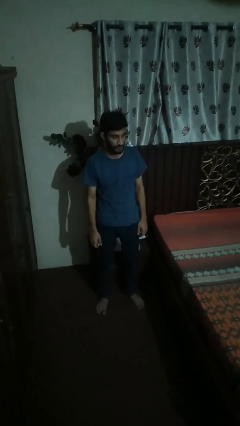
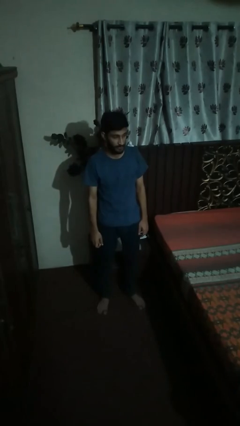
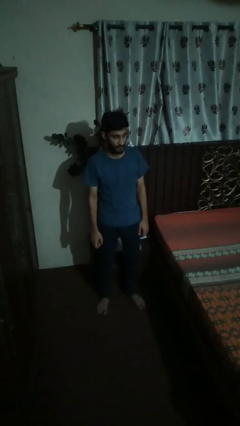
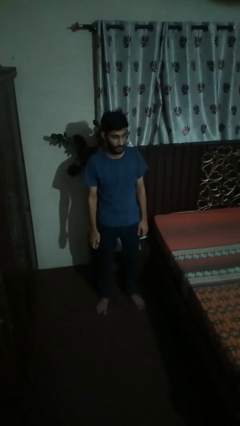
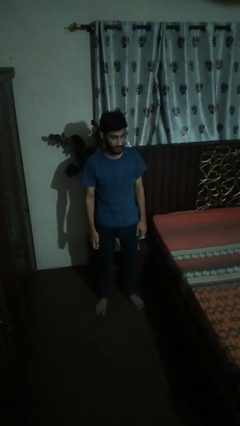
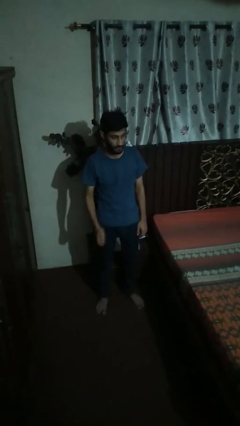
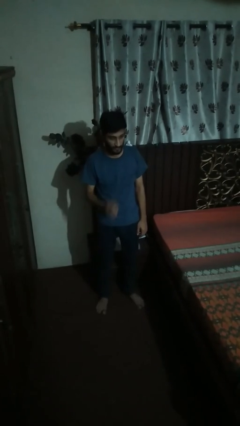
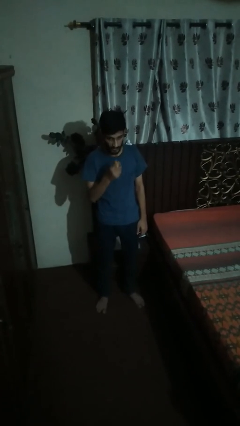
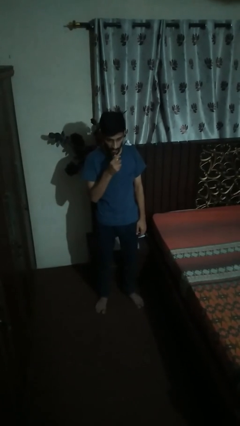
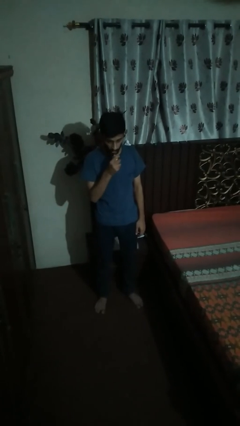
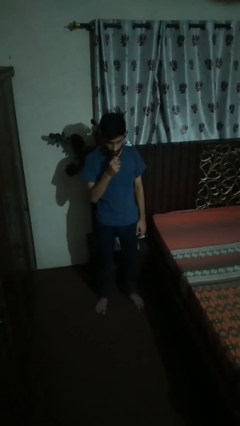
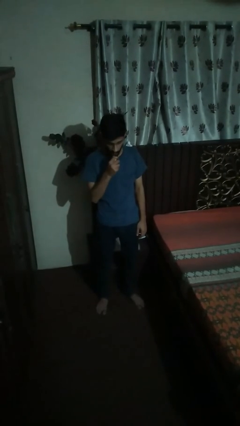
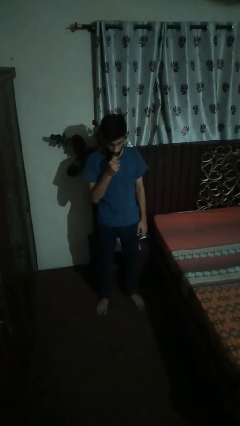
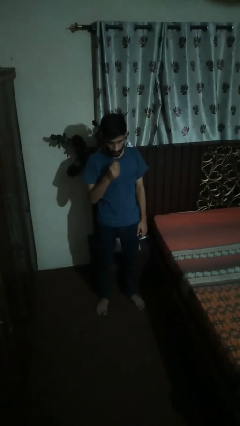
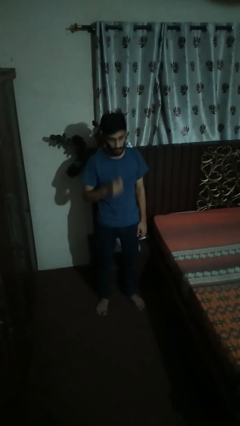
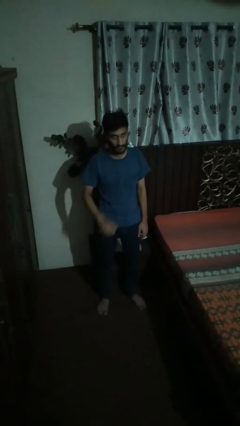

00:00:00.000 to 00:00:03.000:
person eats banana

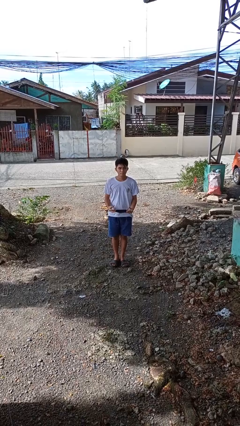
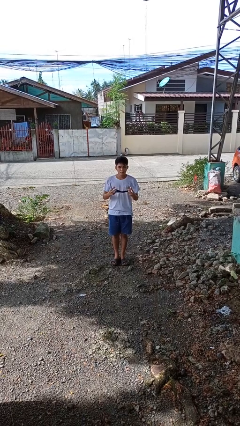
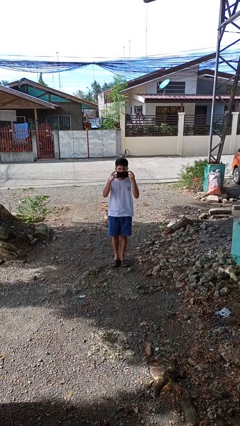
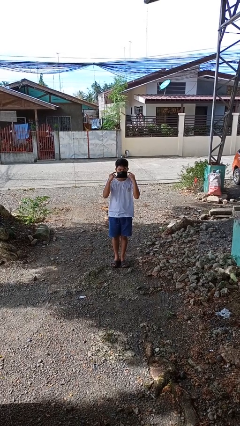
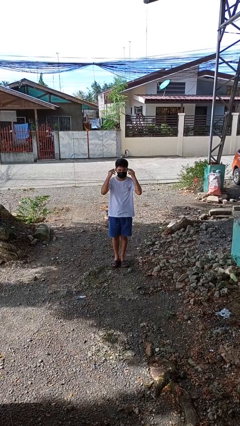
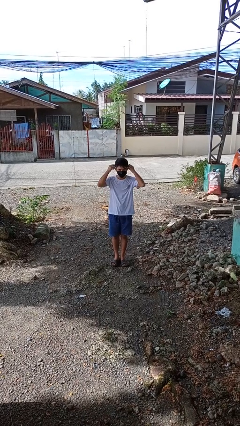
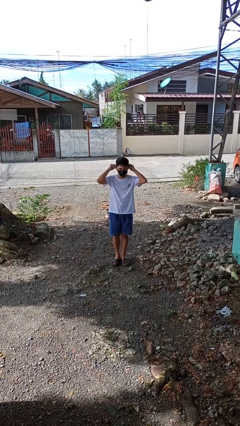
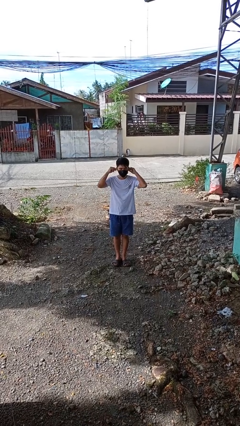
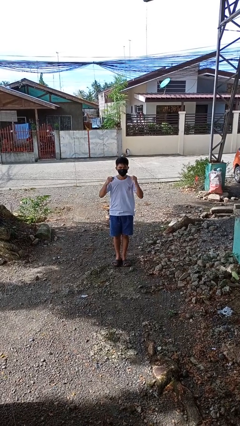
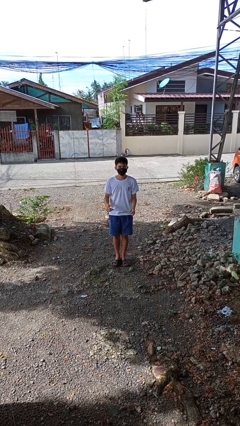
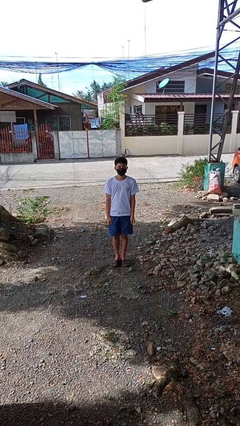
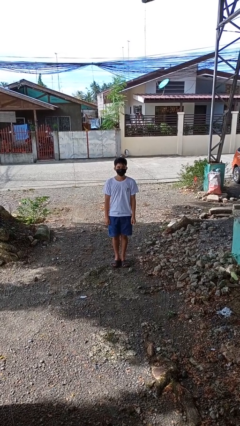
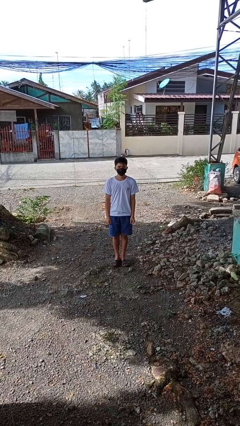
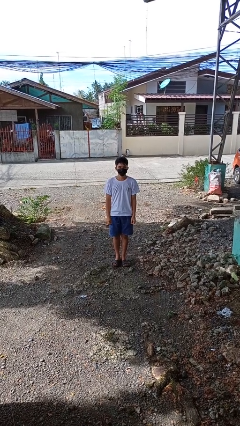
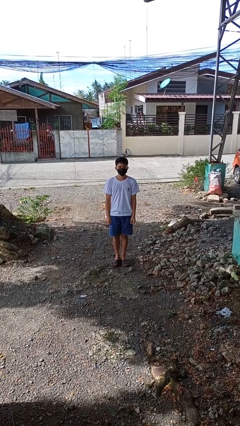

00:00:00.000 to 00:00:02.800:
person puts on facemask

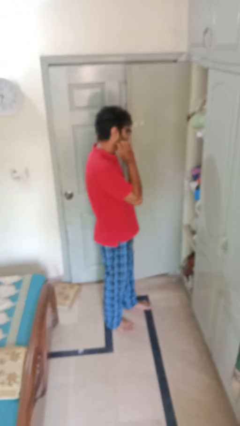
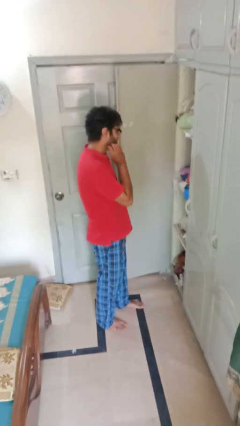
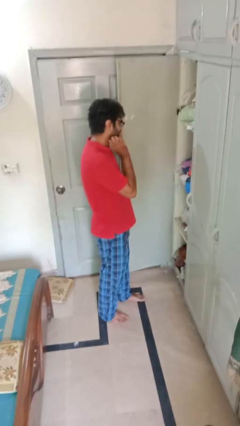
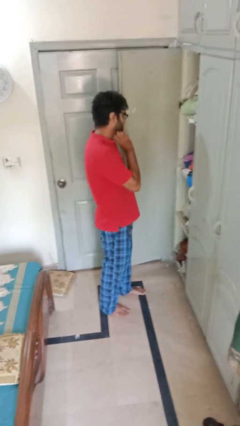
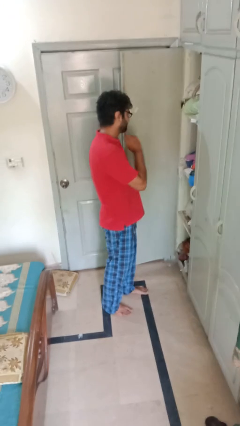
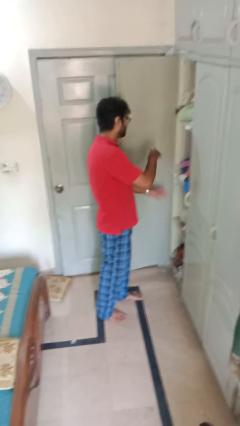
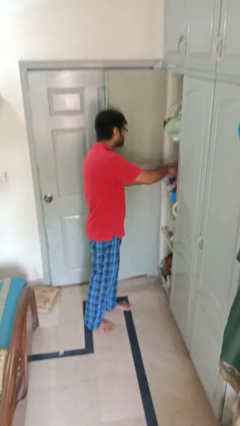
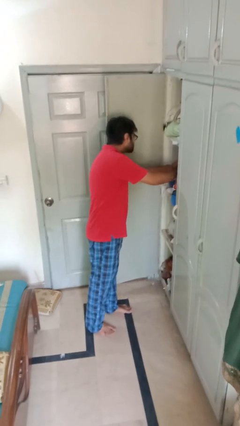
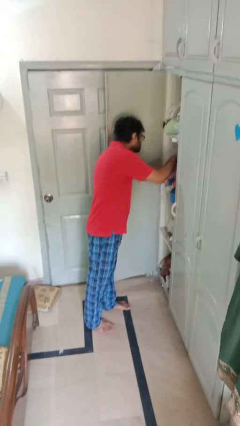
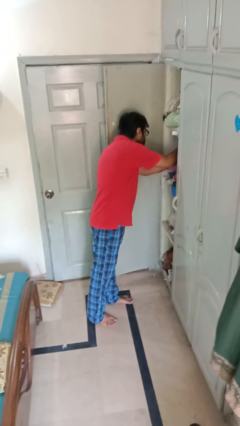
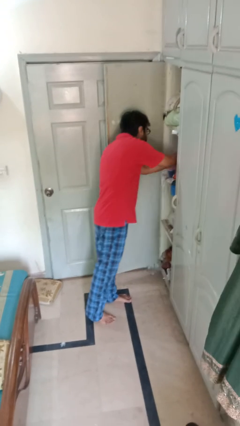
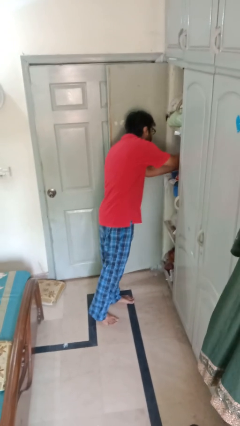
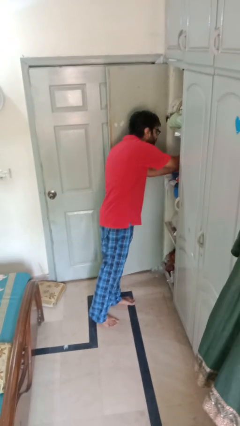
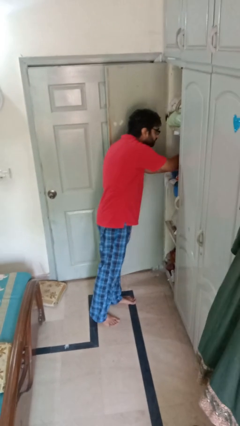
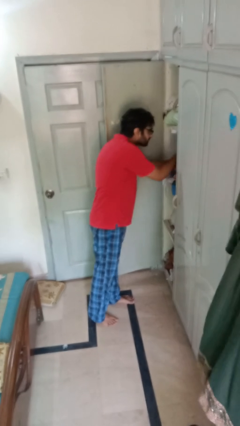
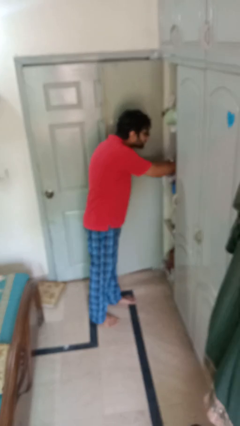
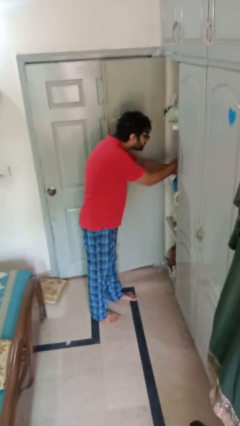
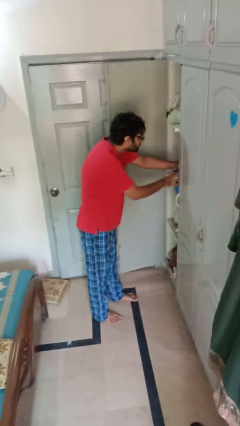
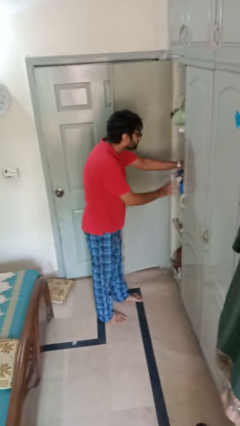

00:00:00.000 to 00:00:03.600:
person searches in cabinet

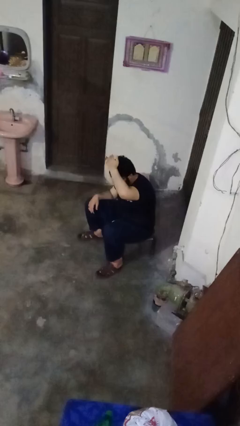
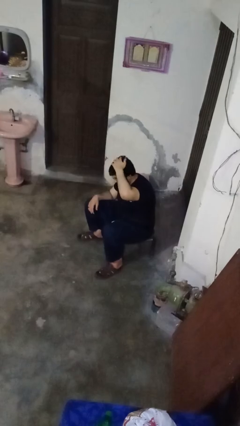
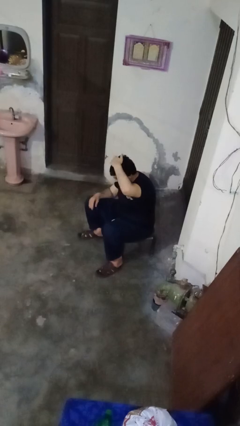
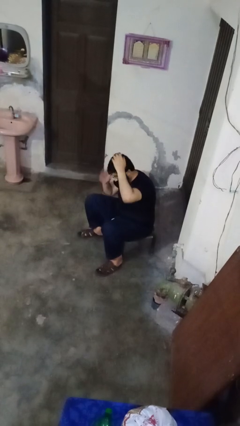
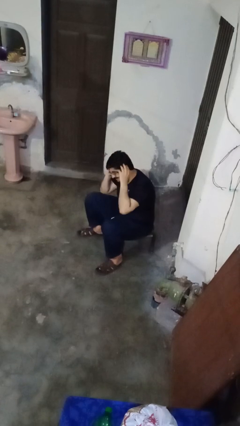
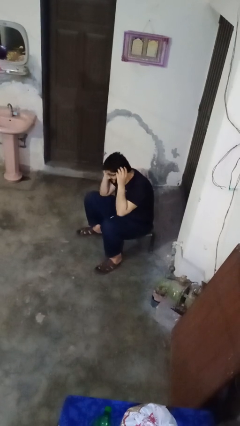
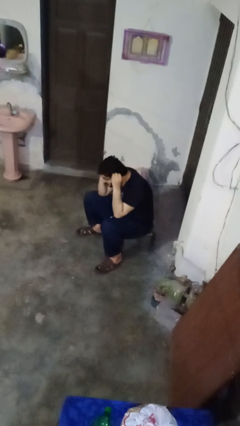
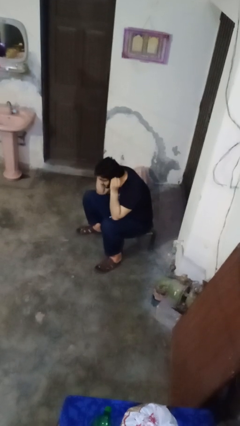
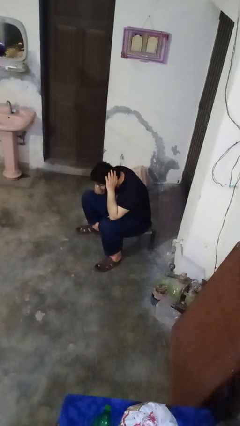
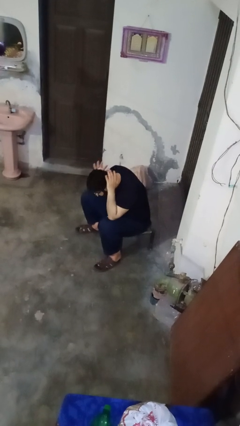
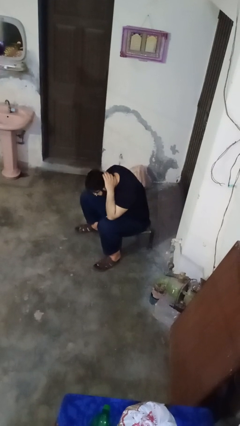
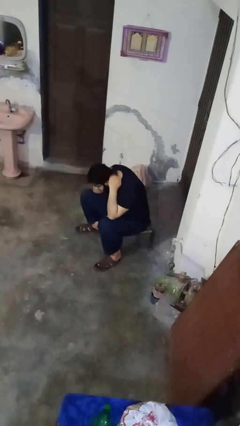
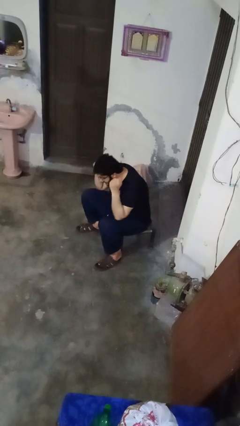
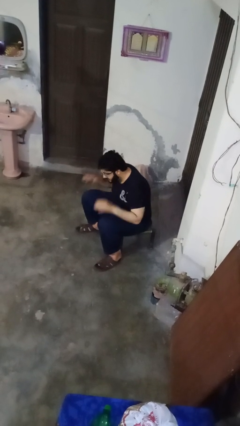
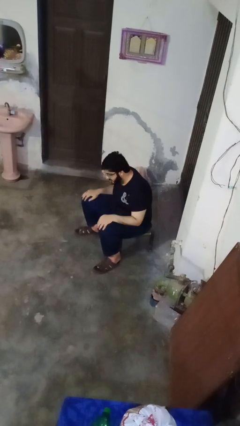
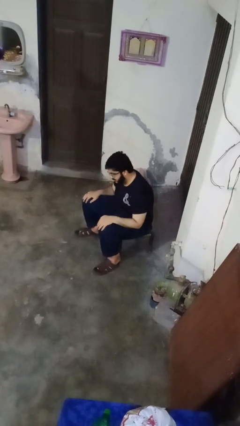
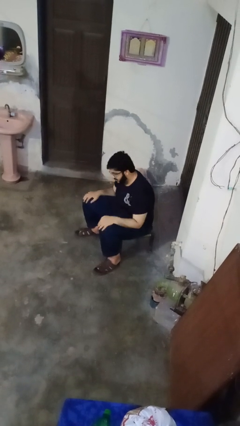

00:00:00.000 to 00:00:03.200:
person strokes hair

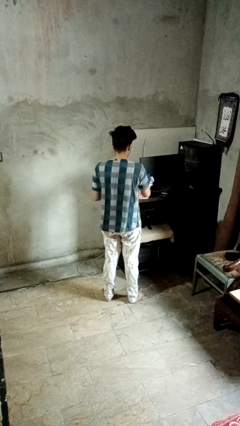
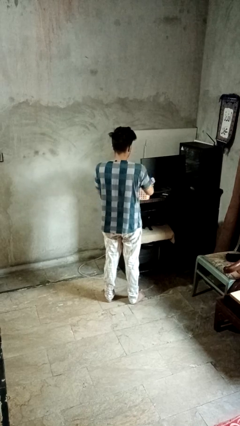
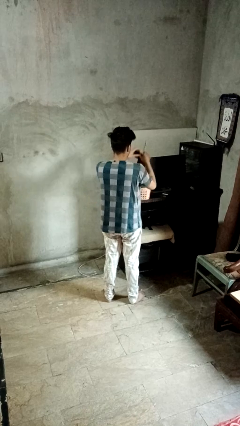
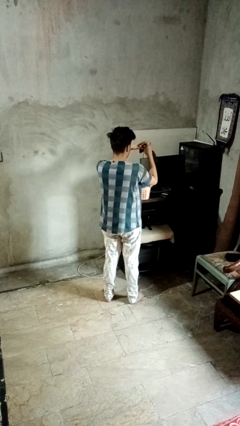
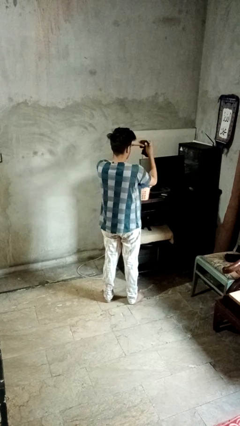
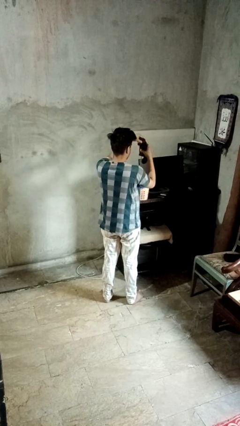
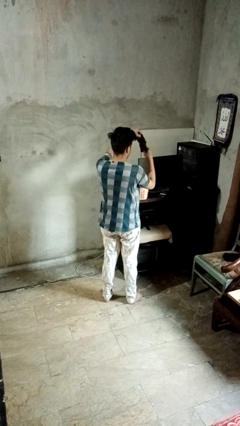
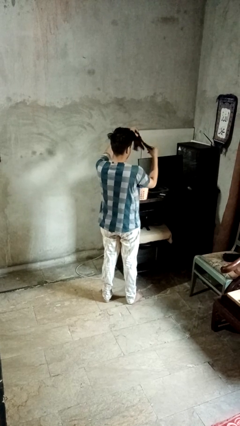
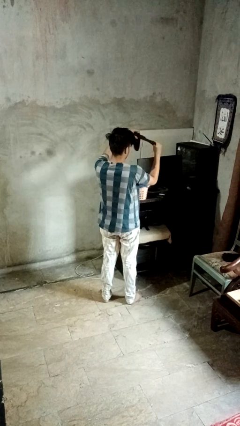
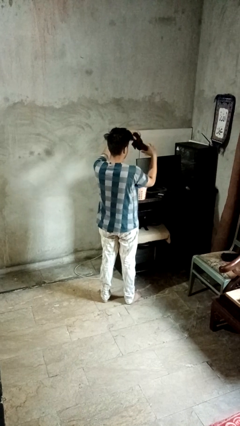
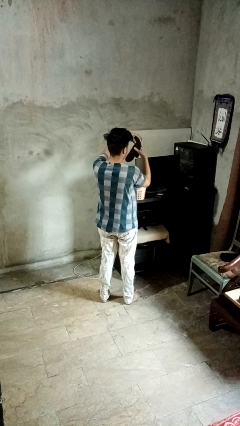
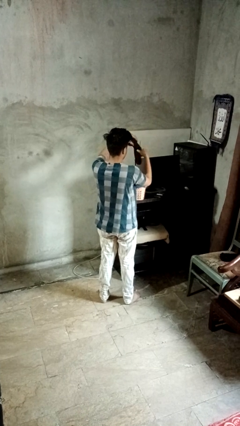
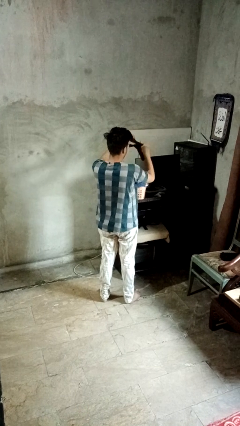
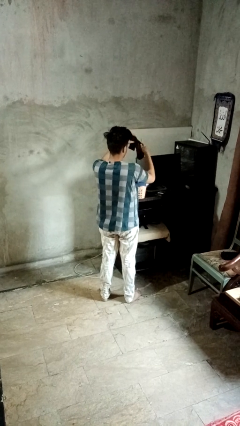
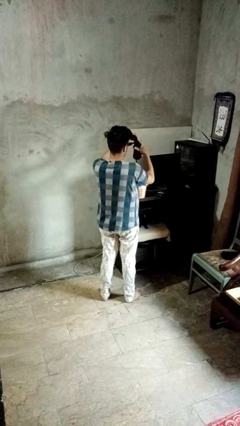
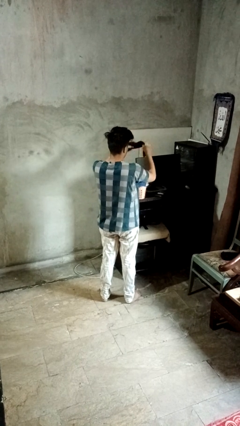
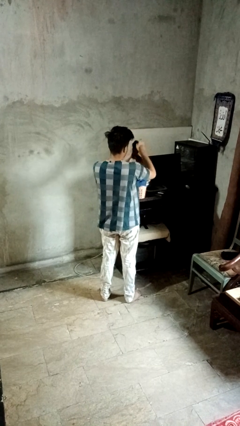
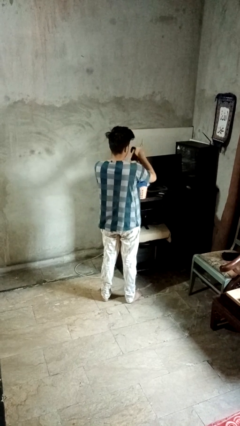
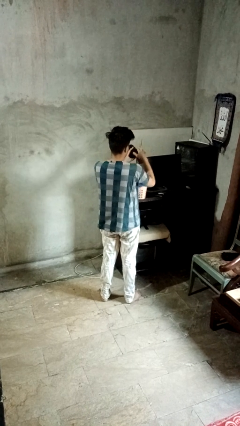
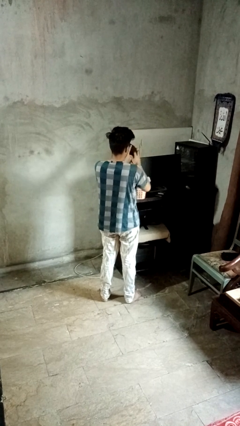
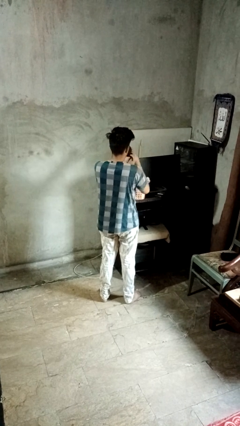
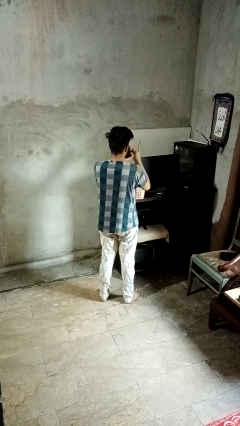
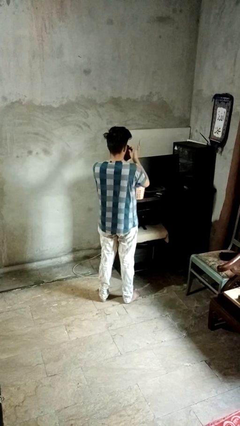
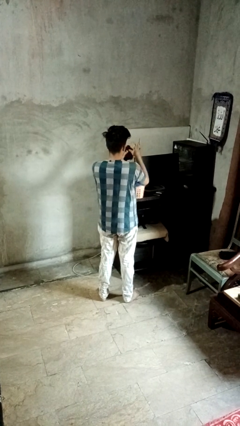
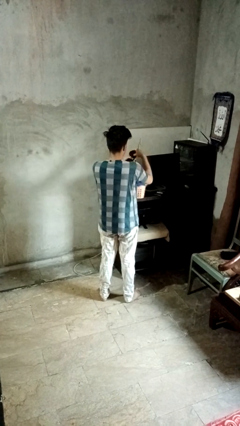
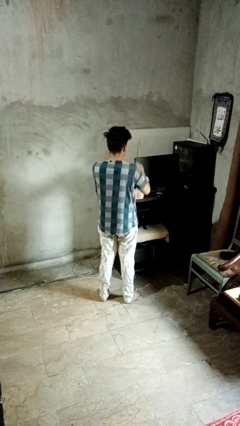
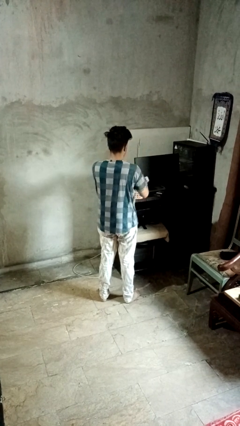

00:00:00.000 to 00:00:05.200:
person folds socks
